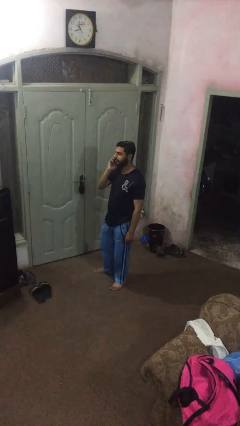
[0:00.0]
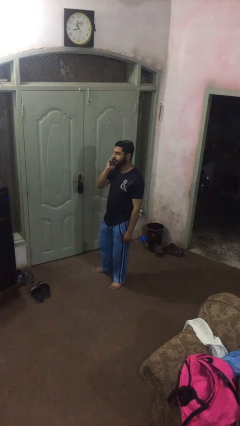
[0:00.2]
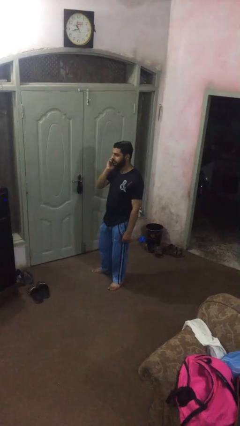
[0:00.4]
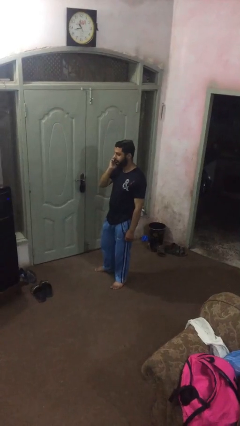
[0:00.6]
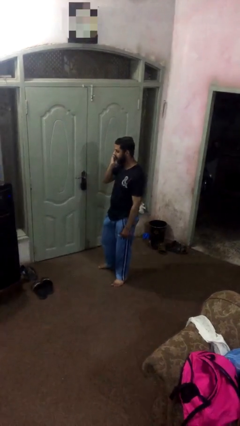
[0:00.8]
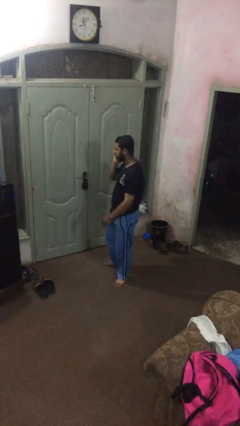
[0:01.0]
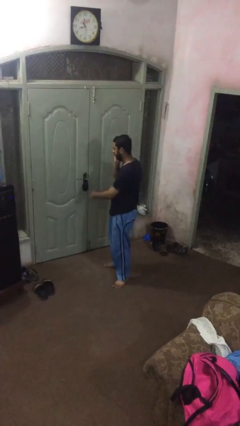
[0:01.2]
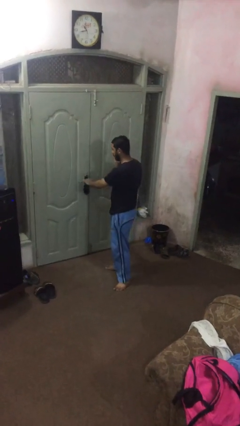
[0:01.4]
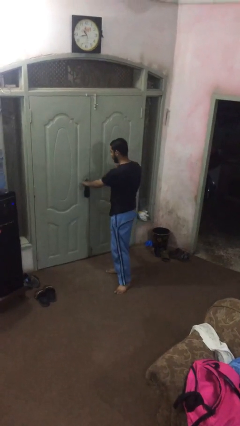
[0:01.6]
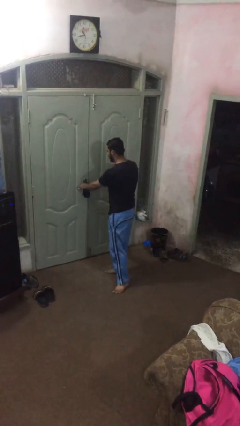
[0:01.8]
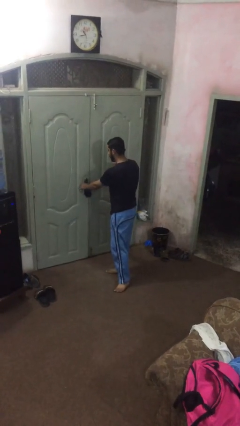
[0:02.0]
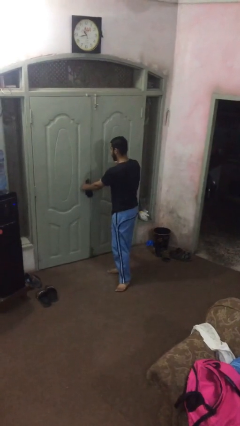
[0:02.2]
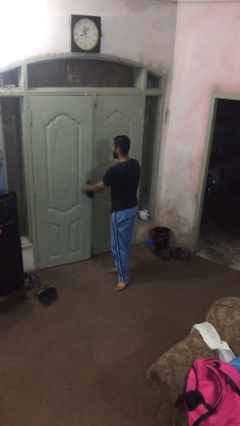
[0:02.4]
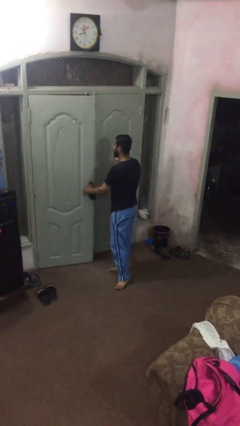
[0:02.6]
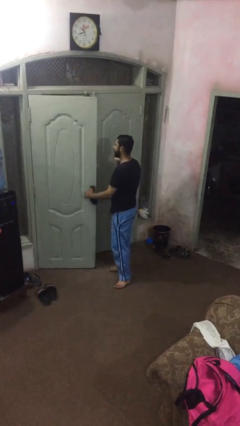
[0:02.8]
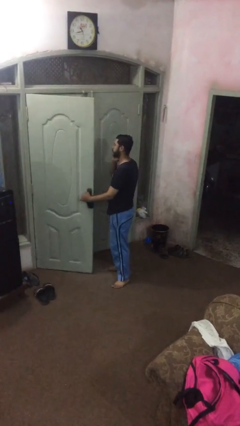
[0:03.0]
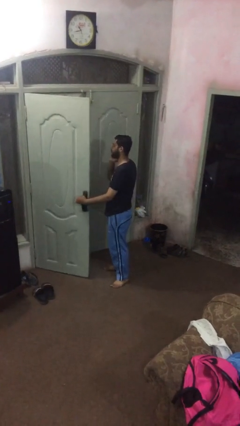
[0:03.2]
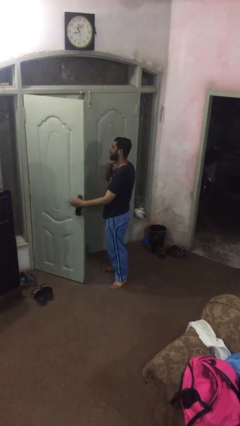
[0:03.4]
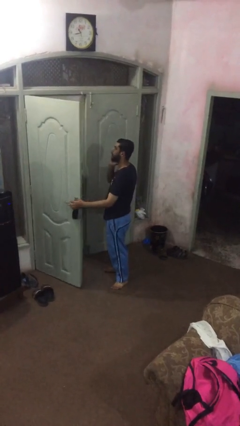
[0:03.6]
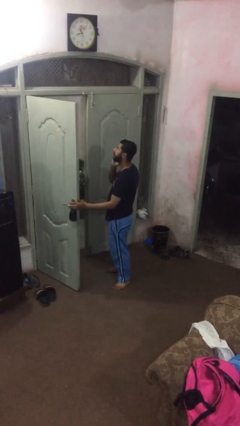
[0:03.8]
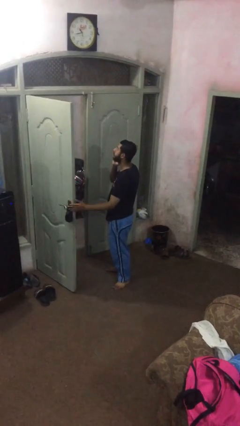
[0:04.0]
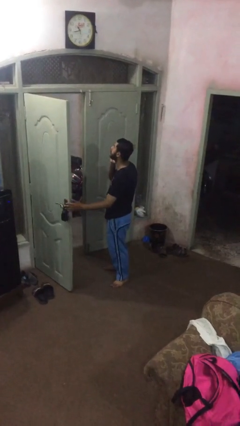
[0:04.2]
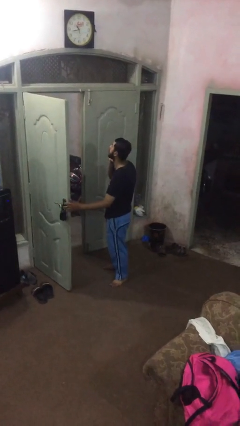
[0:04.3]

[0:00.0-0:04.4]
person opens facility door

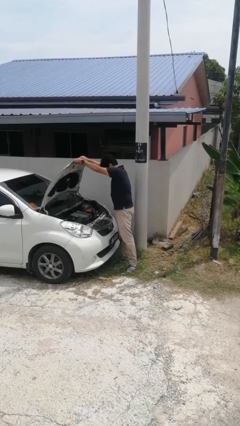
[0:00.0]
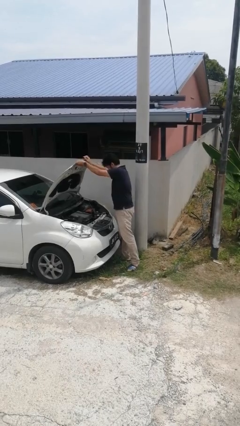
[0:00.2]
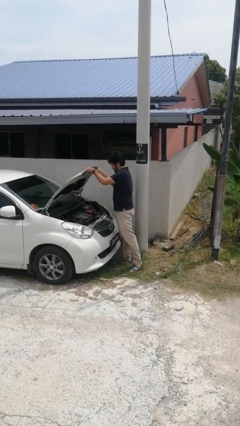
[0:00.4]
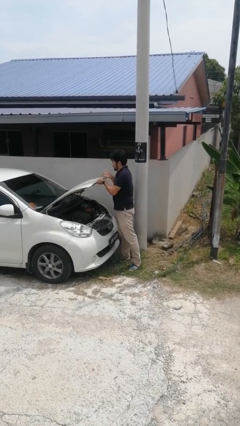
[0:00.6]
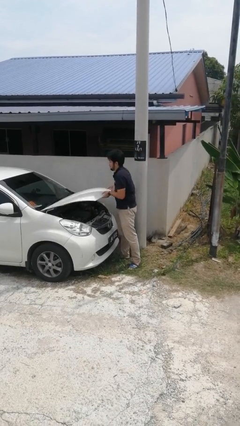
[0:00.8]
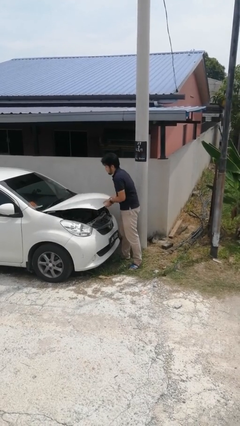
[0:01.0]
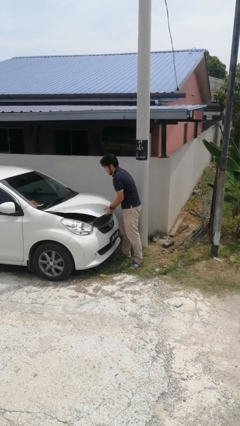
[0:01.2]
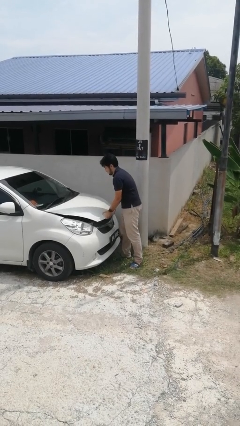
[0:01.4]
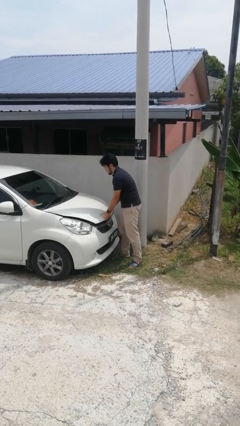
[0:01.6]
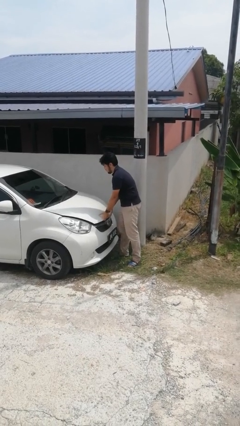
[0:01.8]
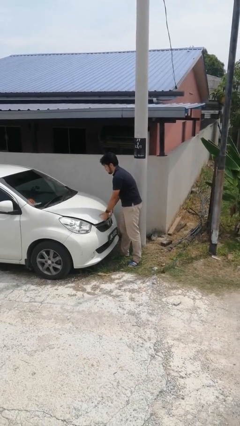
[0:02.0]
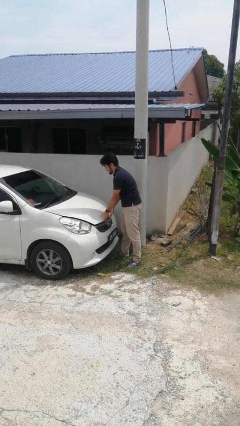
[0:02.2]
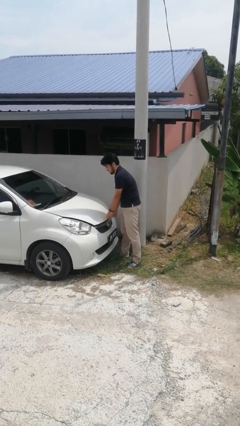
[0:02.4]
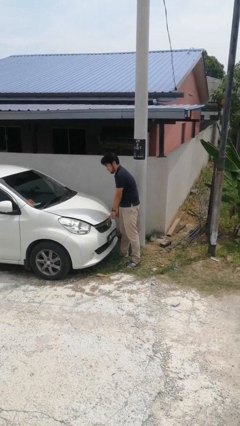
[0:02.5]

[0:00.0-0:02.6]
person closes car hood

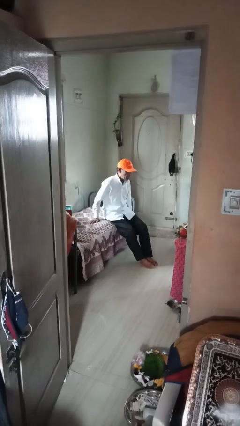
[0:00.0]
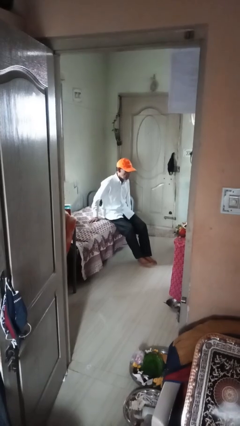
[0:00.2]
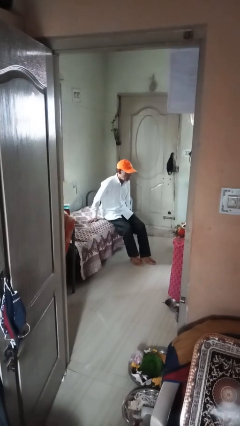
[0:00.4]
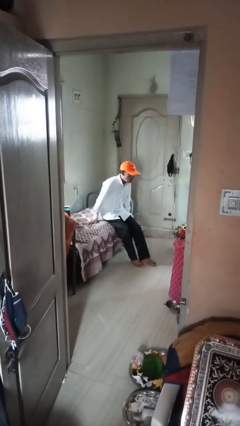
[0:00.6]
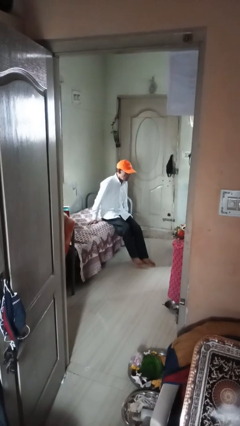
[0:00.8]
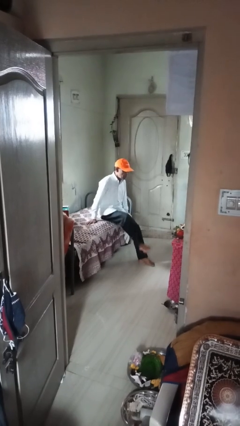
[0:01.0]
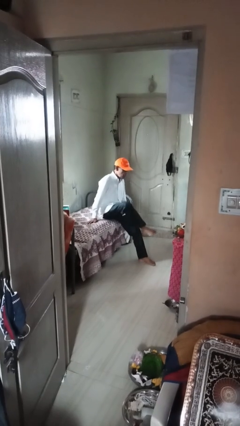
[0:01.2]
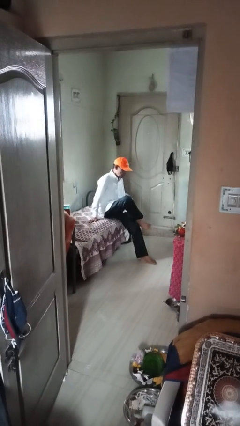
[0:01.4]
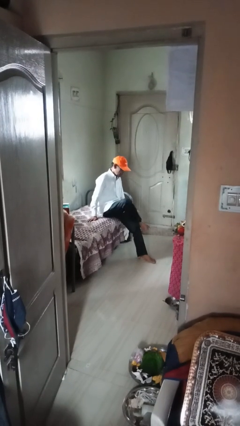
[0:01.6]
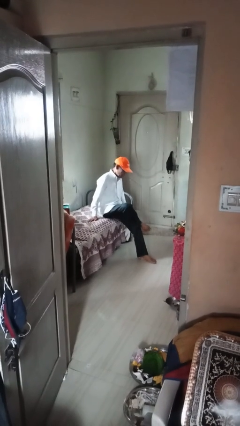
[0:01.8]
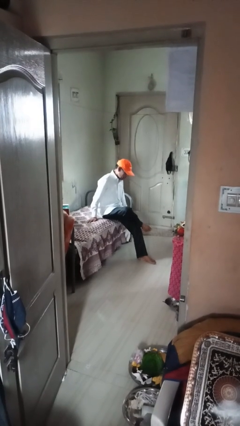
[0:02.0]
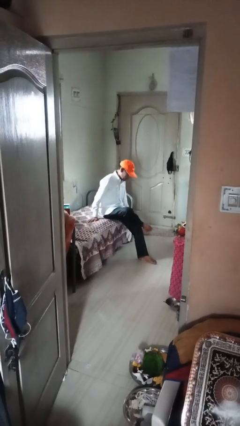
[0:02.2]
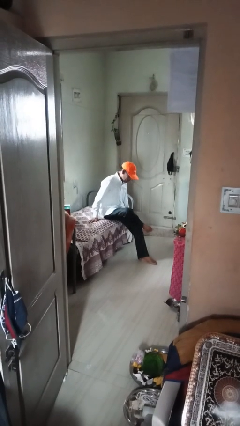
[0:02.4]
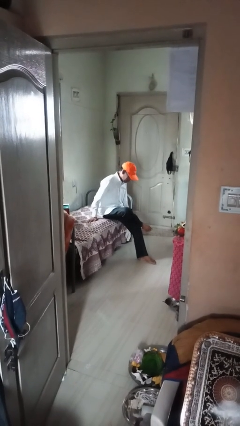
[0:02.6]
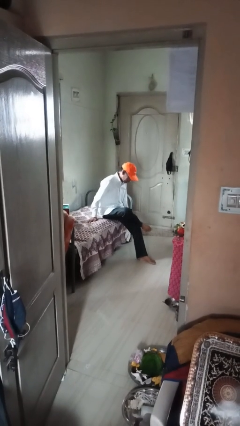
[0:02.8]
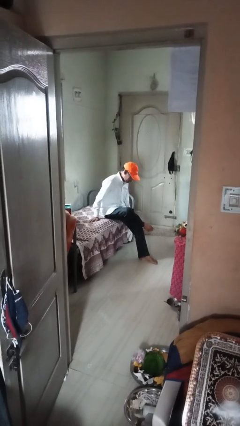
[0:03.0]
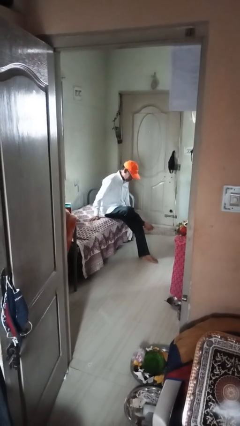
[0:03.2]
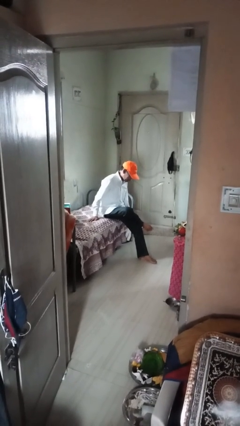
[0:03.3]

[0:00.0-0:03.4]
person crosses legs

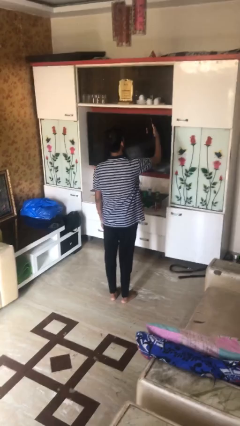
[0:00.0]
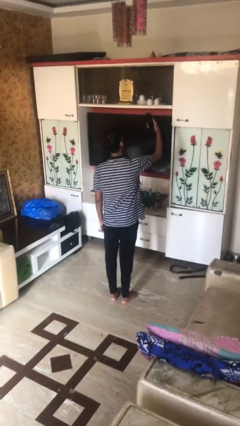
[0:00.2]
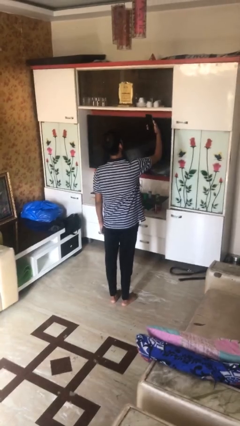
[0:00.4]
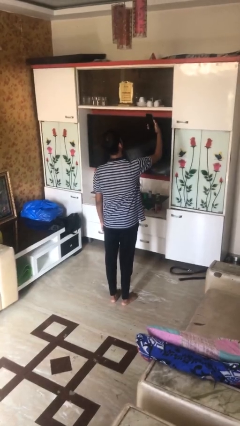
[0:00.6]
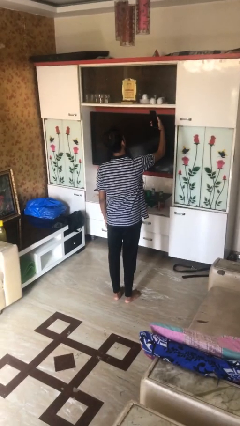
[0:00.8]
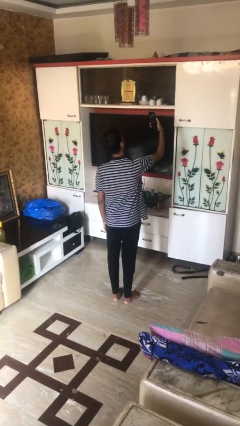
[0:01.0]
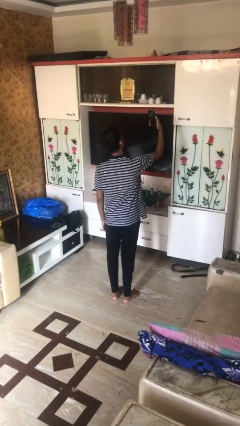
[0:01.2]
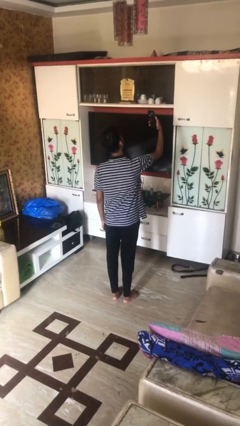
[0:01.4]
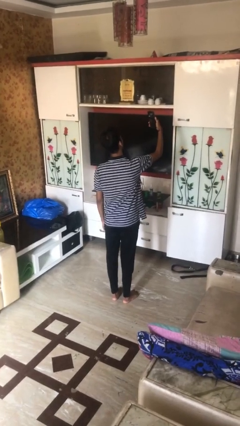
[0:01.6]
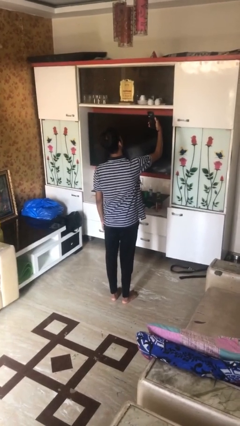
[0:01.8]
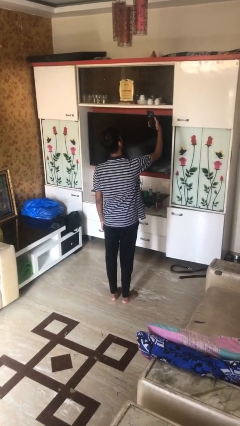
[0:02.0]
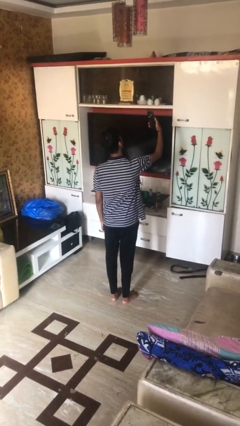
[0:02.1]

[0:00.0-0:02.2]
person takes selfie

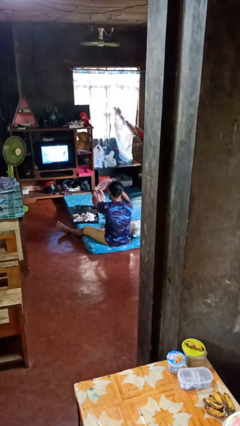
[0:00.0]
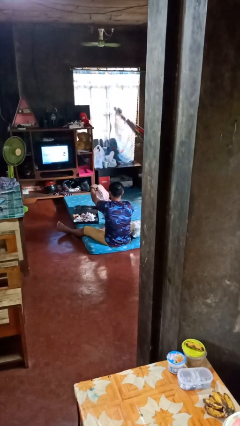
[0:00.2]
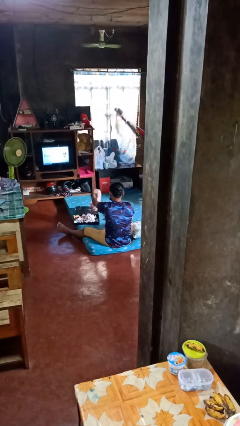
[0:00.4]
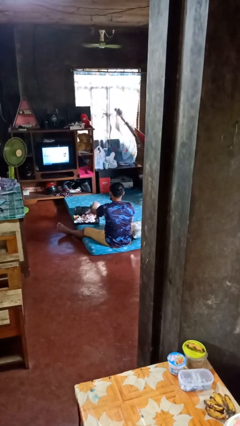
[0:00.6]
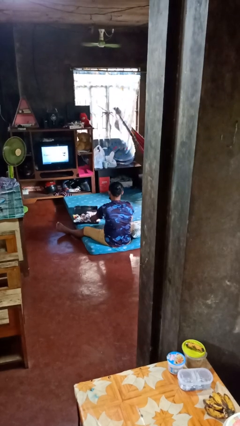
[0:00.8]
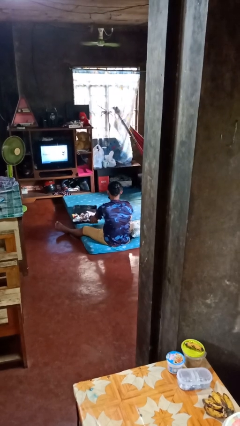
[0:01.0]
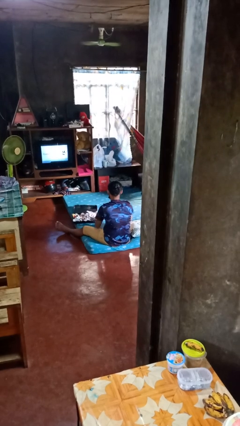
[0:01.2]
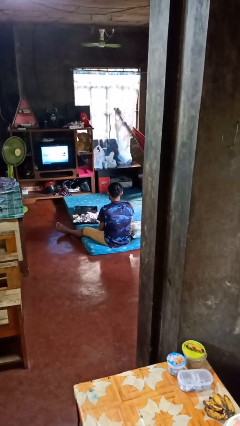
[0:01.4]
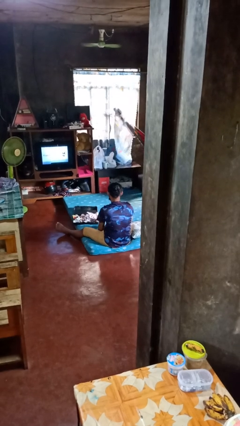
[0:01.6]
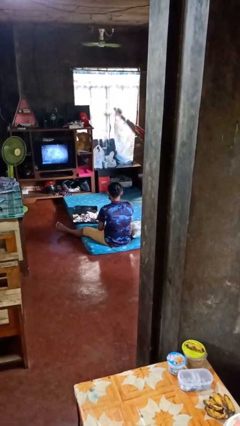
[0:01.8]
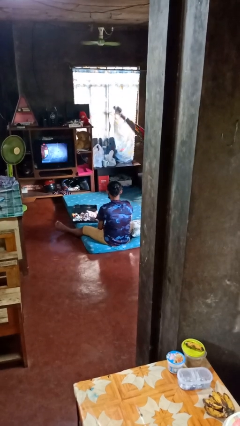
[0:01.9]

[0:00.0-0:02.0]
person loads clothes into suitcase

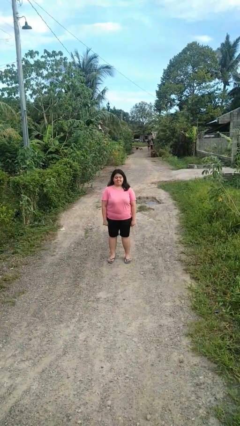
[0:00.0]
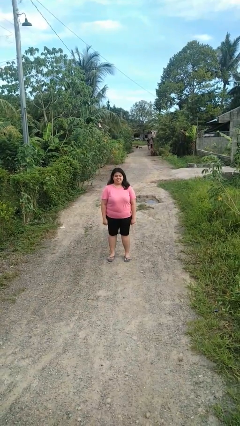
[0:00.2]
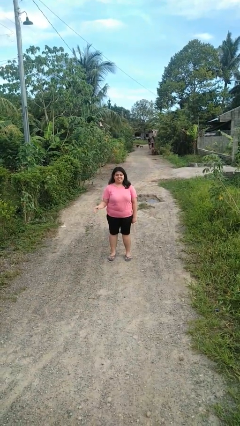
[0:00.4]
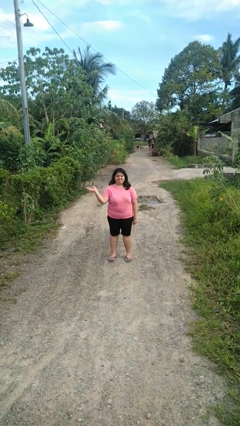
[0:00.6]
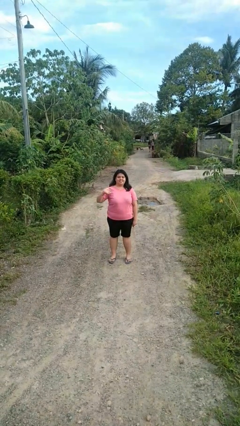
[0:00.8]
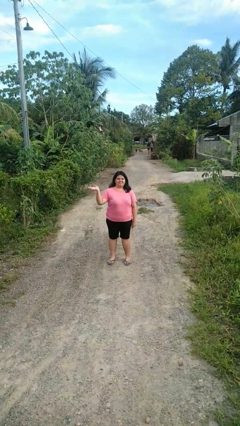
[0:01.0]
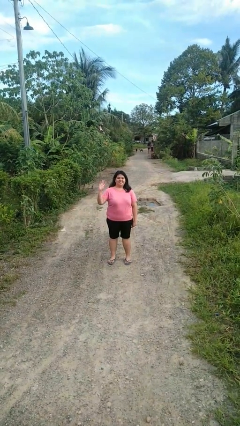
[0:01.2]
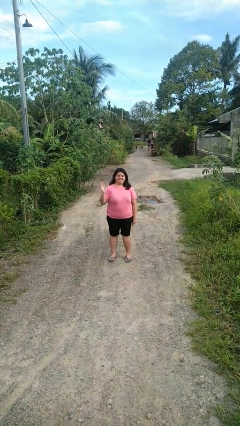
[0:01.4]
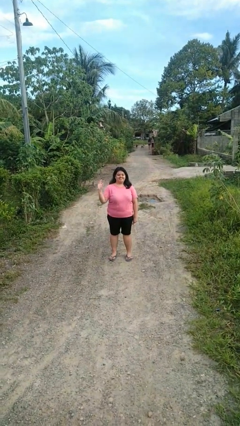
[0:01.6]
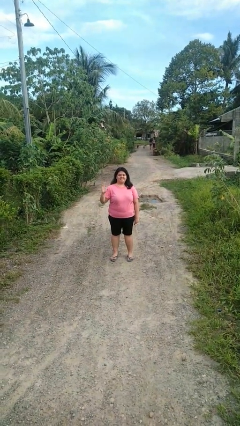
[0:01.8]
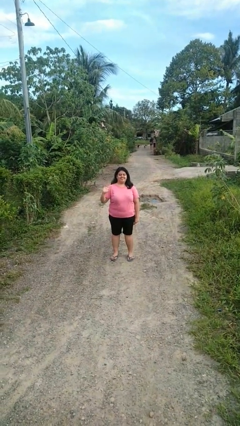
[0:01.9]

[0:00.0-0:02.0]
person waves at person

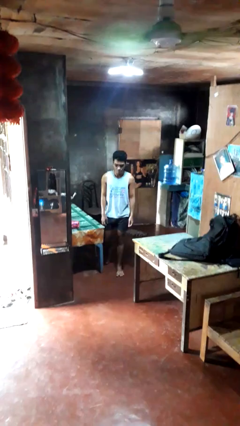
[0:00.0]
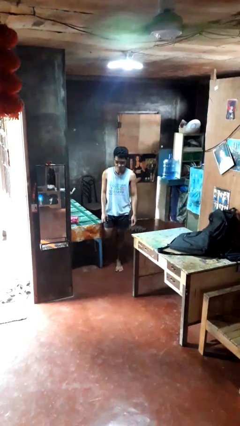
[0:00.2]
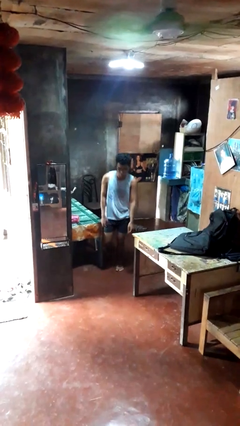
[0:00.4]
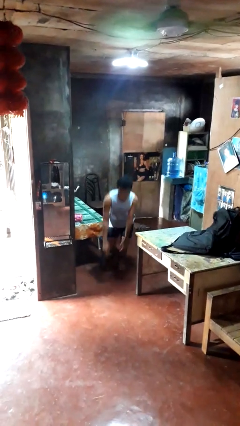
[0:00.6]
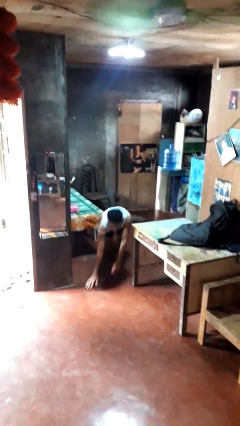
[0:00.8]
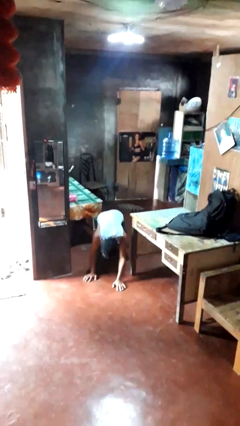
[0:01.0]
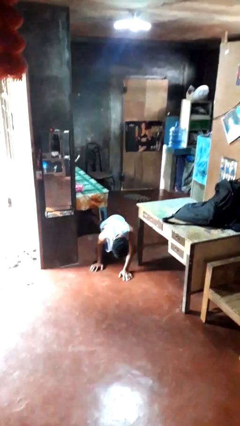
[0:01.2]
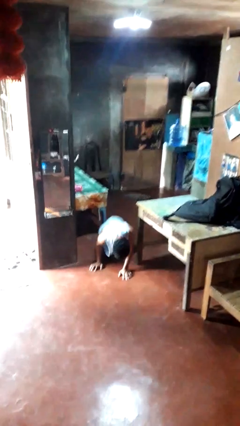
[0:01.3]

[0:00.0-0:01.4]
person trips on object on floor
